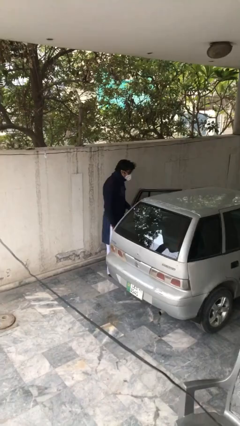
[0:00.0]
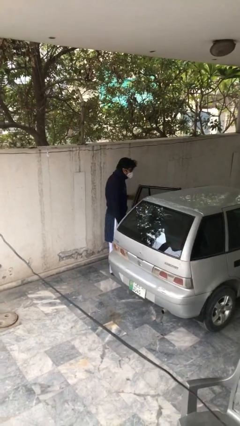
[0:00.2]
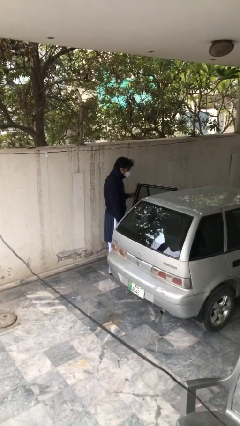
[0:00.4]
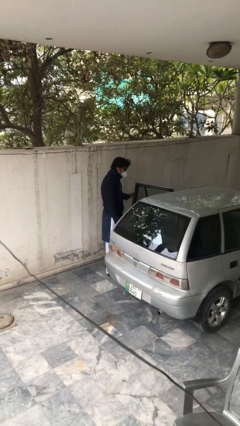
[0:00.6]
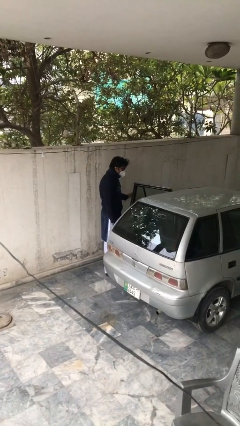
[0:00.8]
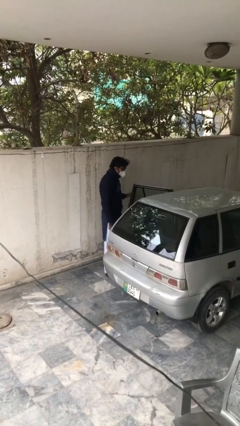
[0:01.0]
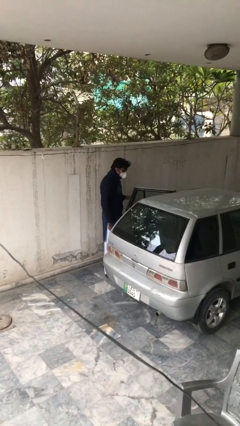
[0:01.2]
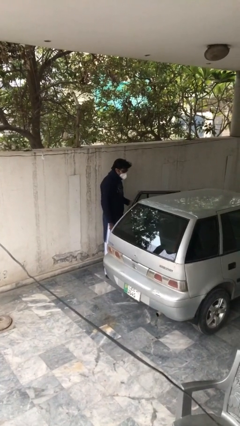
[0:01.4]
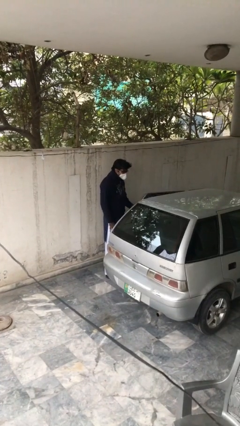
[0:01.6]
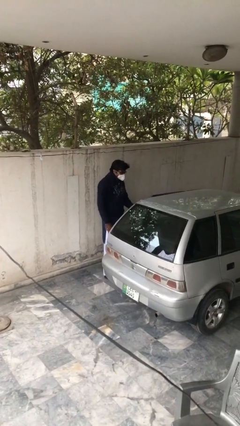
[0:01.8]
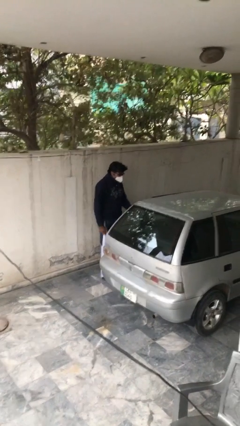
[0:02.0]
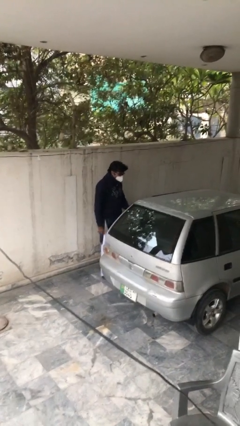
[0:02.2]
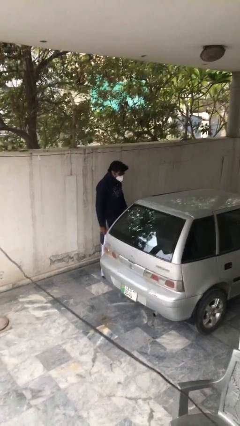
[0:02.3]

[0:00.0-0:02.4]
person closes car door

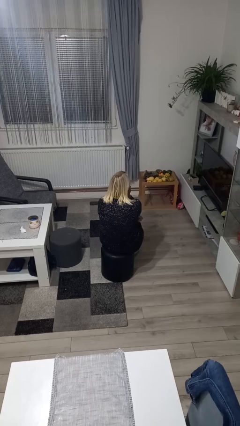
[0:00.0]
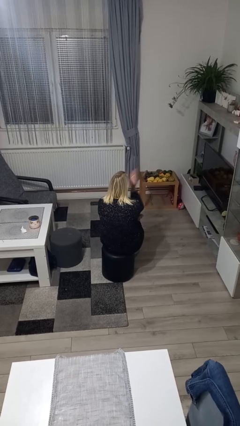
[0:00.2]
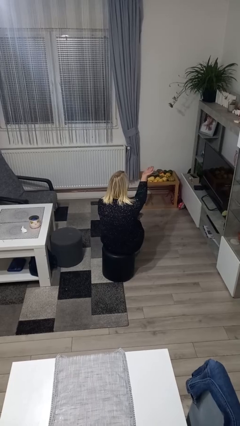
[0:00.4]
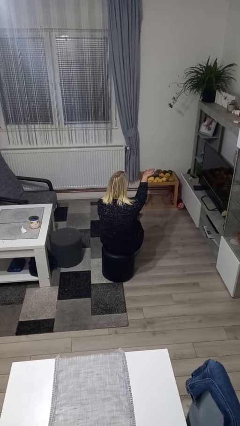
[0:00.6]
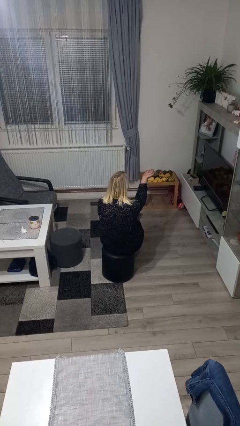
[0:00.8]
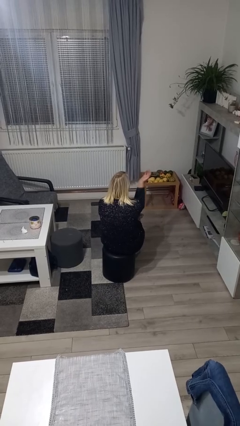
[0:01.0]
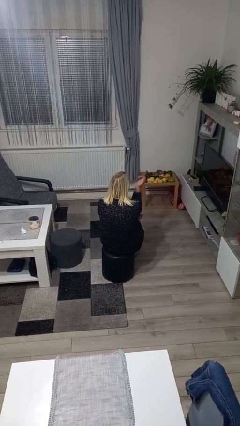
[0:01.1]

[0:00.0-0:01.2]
person gestures blow kiss

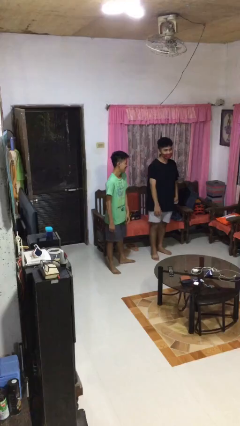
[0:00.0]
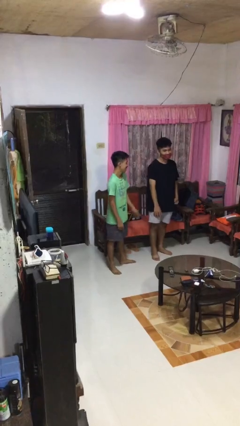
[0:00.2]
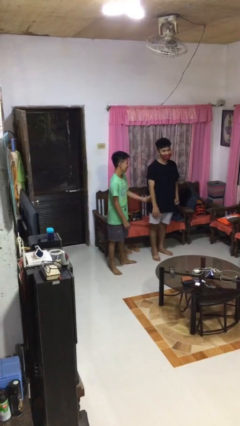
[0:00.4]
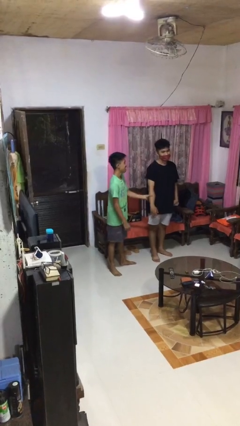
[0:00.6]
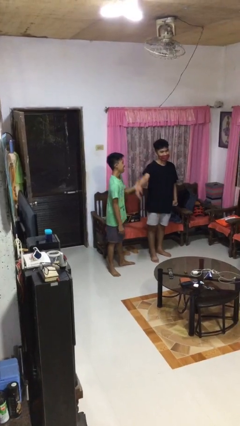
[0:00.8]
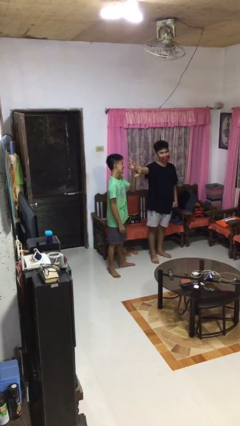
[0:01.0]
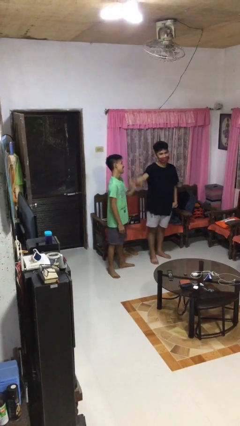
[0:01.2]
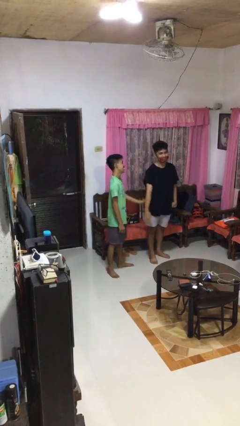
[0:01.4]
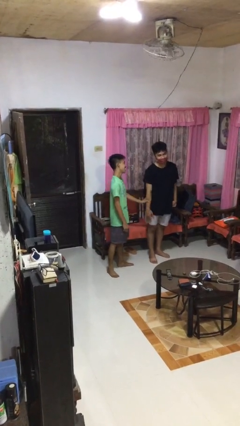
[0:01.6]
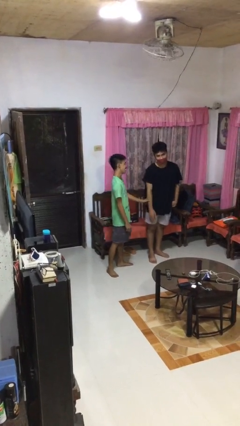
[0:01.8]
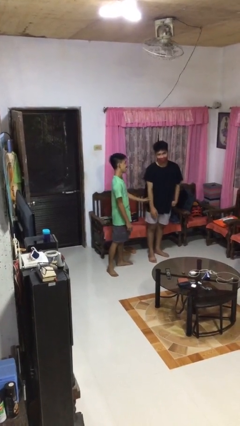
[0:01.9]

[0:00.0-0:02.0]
person grabs person by forearm

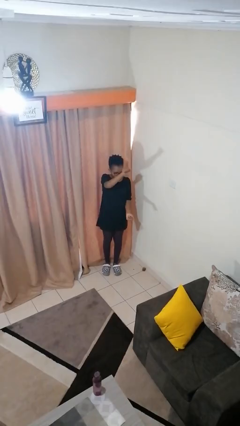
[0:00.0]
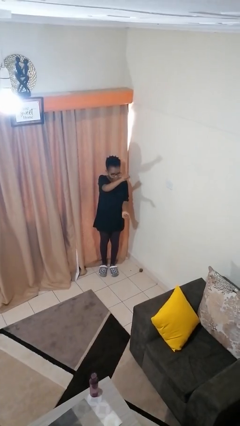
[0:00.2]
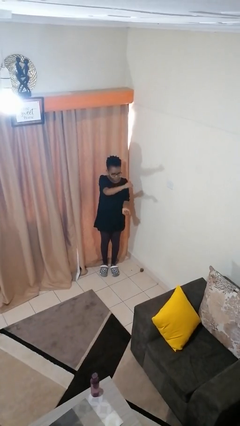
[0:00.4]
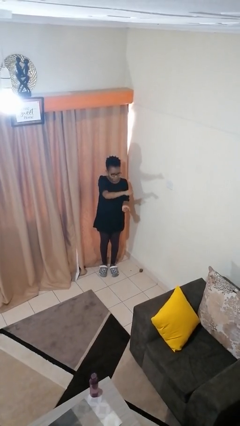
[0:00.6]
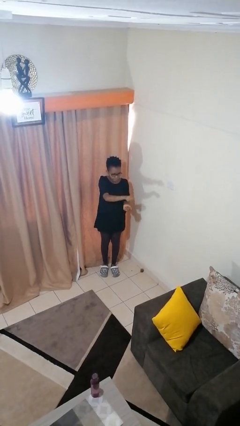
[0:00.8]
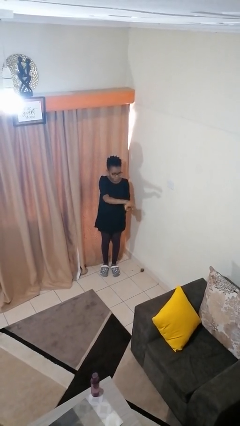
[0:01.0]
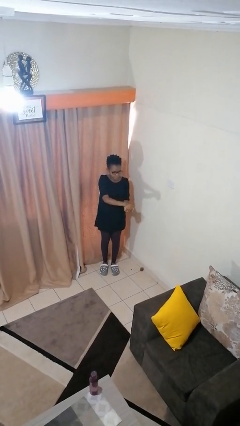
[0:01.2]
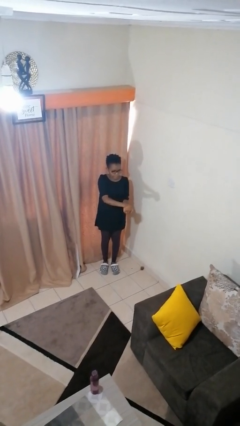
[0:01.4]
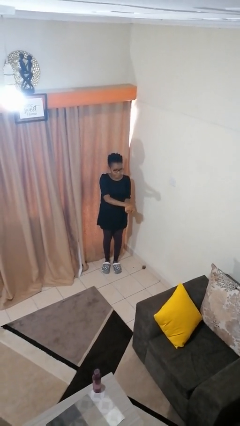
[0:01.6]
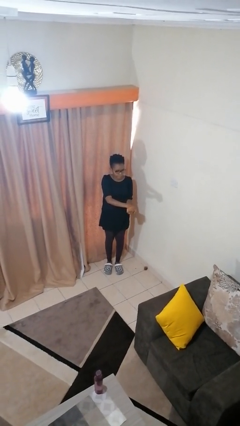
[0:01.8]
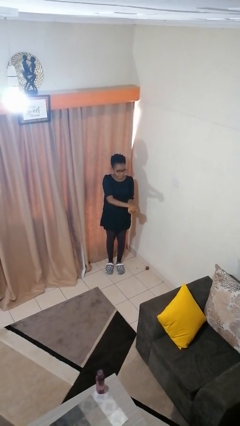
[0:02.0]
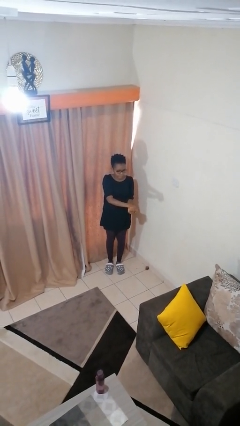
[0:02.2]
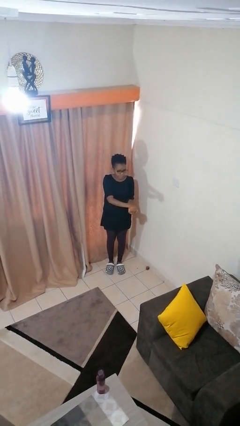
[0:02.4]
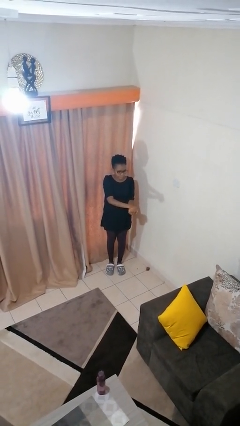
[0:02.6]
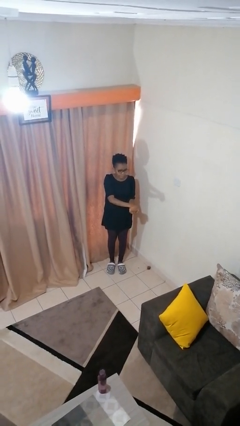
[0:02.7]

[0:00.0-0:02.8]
person gestures zoom out

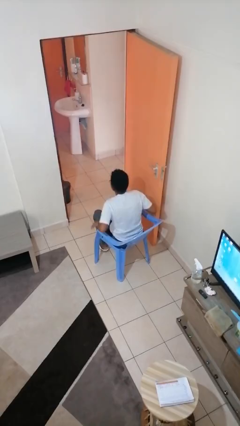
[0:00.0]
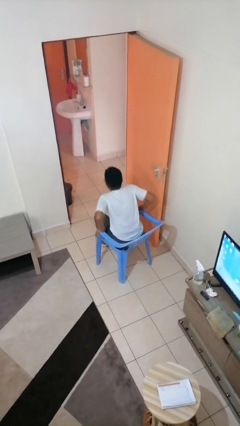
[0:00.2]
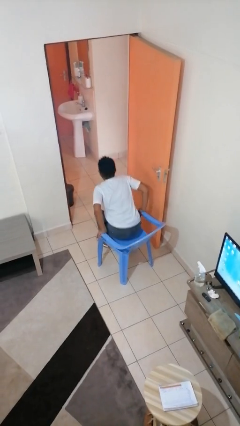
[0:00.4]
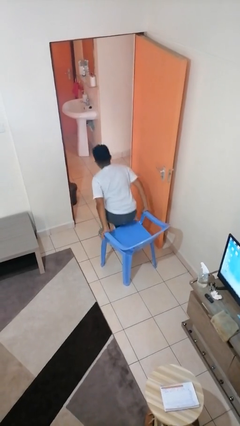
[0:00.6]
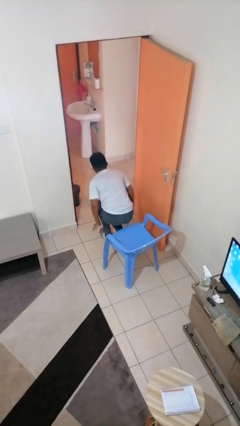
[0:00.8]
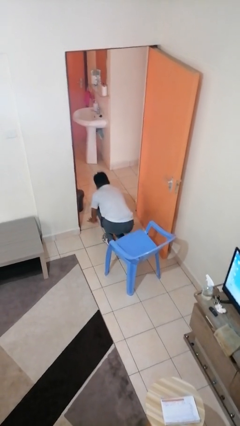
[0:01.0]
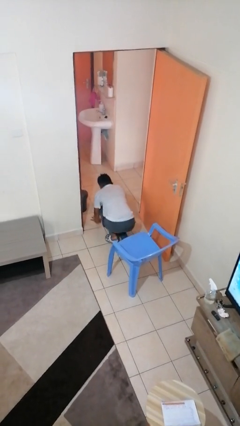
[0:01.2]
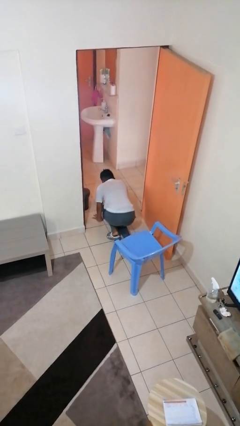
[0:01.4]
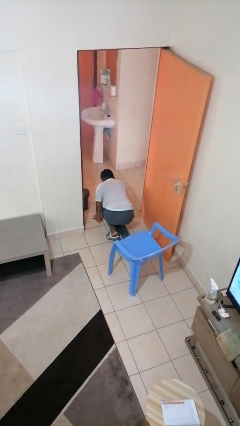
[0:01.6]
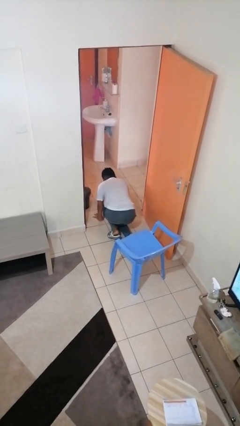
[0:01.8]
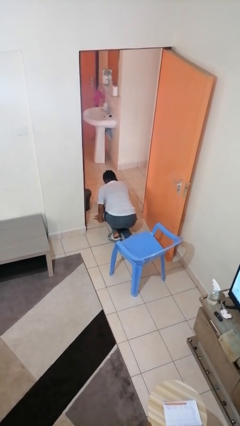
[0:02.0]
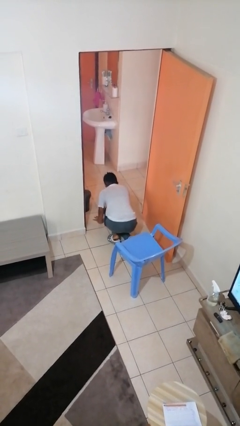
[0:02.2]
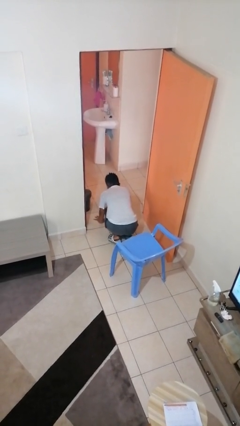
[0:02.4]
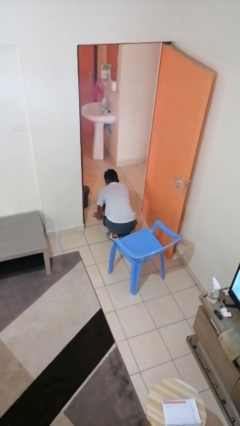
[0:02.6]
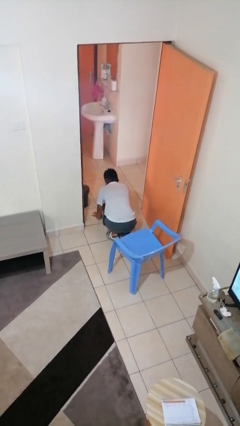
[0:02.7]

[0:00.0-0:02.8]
person falls from chair

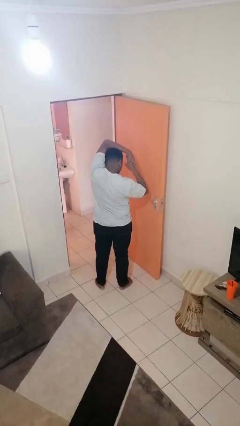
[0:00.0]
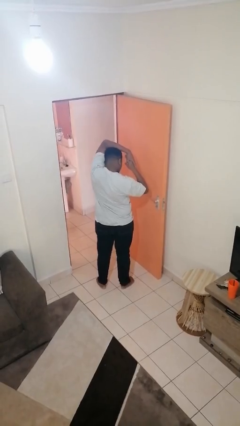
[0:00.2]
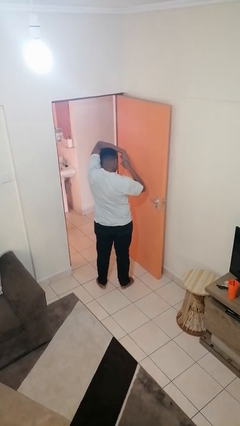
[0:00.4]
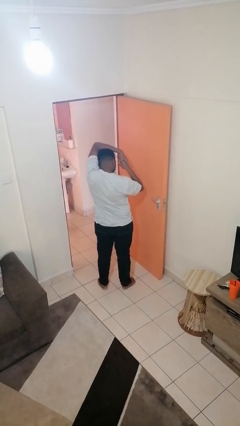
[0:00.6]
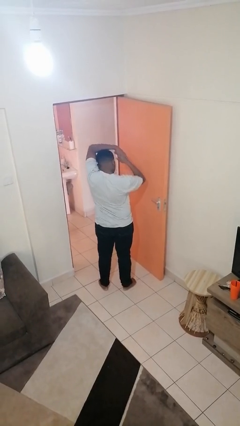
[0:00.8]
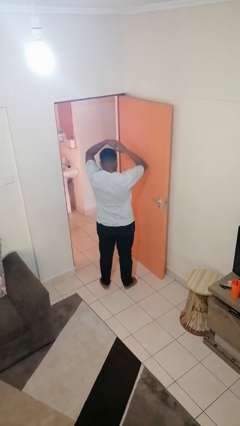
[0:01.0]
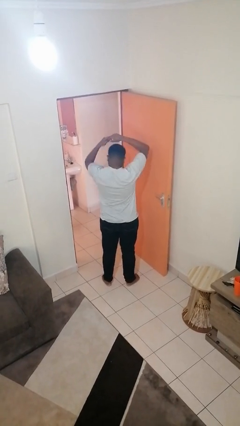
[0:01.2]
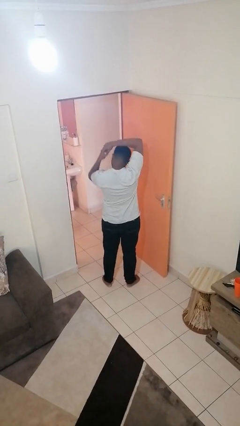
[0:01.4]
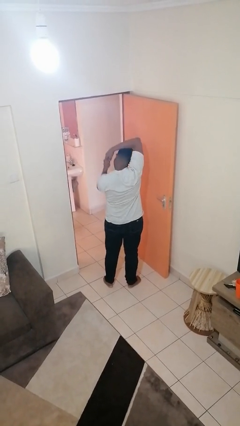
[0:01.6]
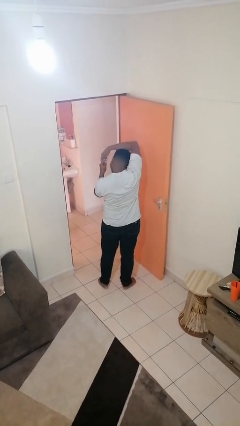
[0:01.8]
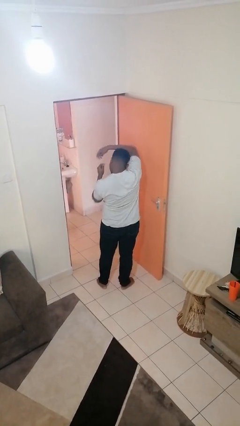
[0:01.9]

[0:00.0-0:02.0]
person stretches arms over head

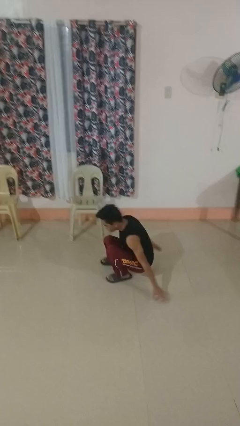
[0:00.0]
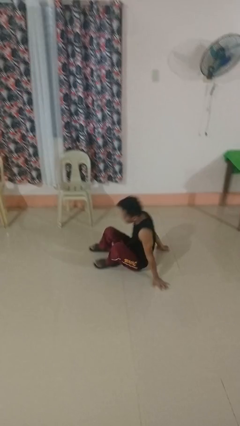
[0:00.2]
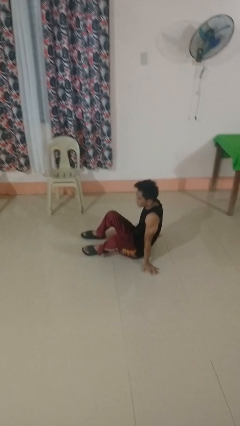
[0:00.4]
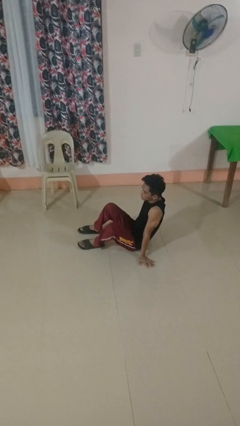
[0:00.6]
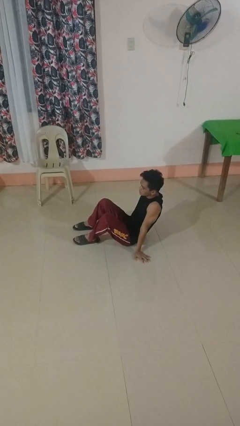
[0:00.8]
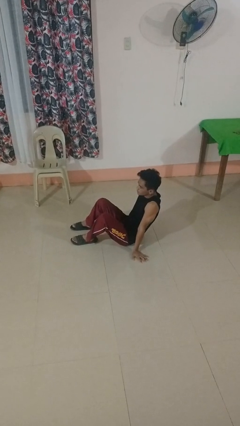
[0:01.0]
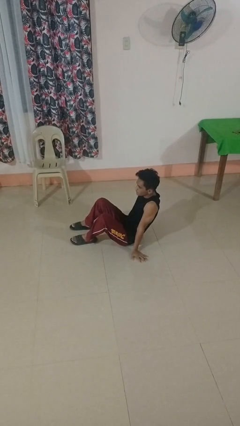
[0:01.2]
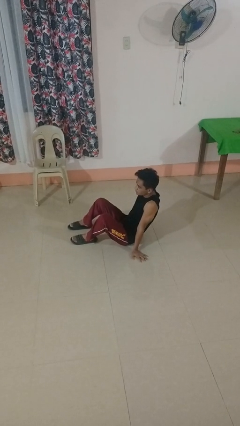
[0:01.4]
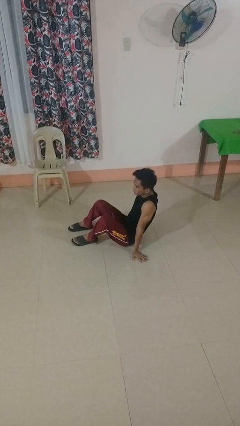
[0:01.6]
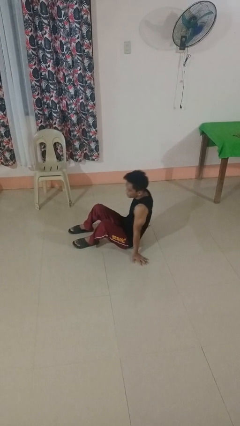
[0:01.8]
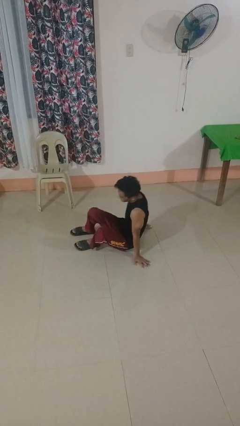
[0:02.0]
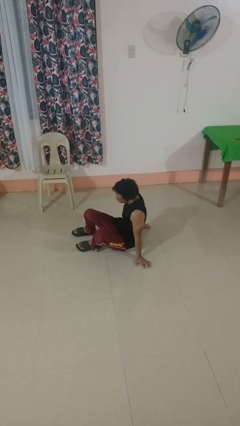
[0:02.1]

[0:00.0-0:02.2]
person falls while standing

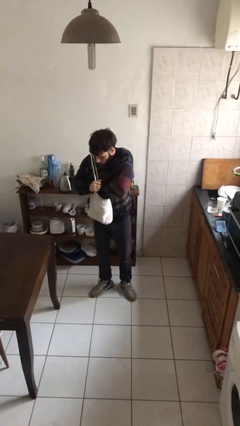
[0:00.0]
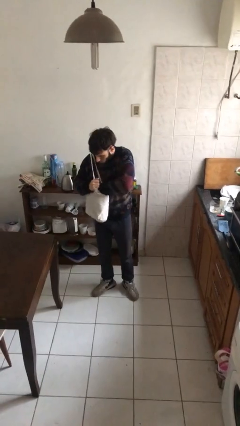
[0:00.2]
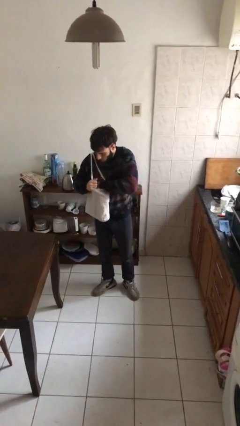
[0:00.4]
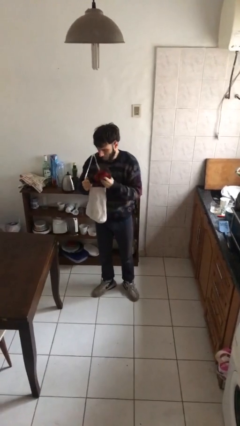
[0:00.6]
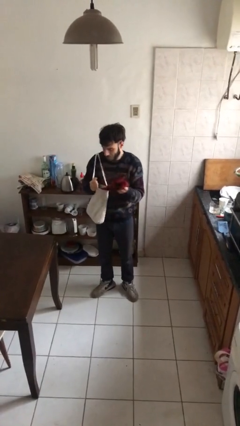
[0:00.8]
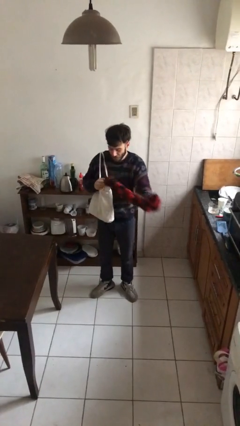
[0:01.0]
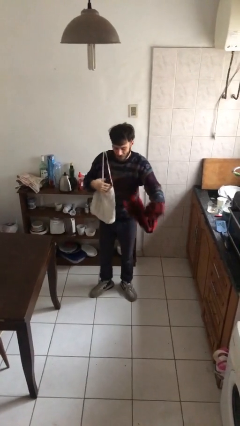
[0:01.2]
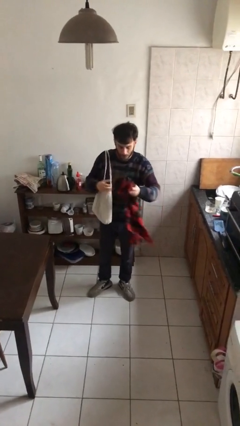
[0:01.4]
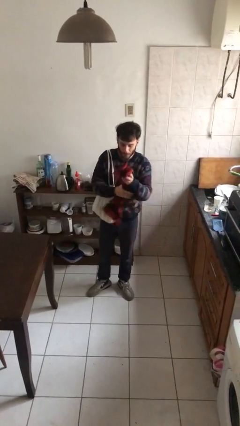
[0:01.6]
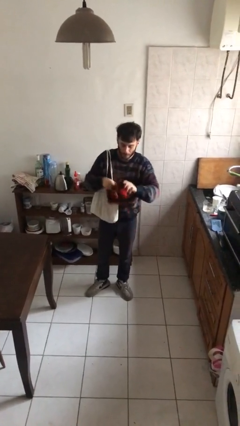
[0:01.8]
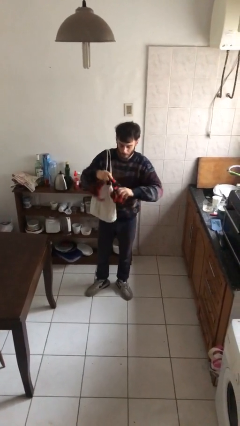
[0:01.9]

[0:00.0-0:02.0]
person takes object from purse
